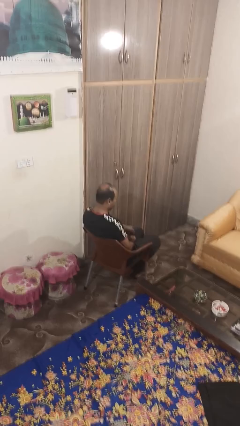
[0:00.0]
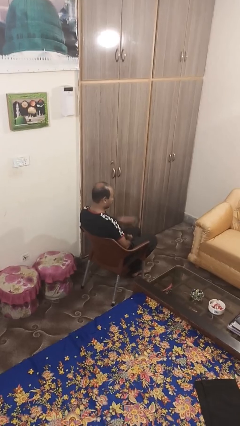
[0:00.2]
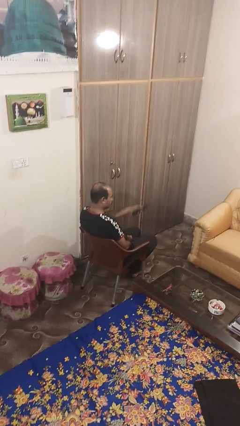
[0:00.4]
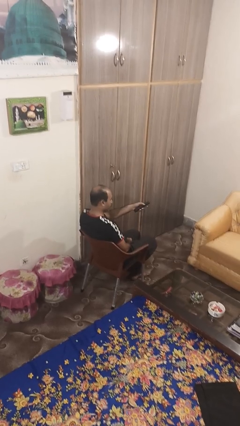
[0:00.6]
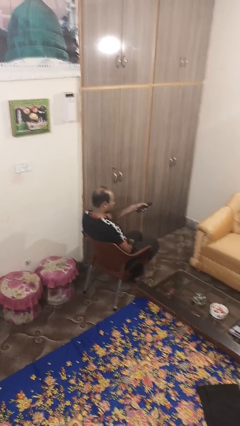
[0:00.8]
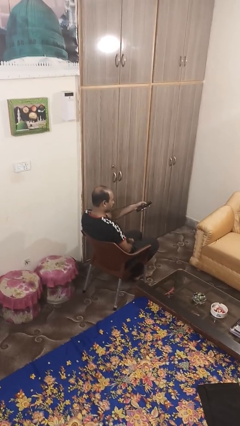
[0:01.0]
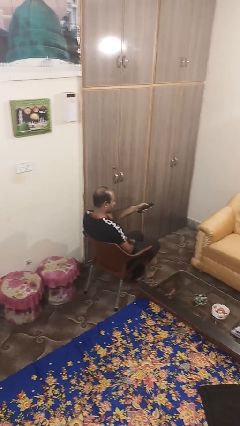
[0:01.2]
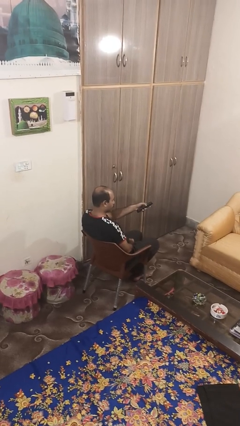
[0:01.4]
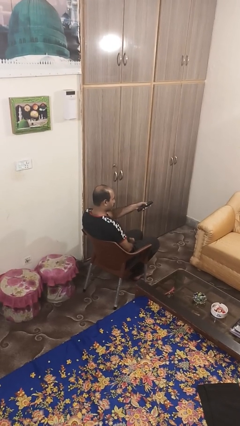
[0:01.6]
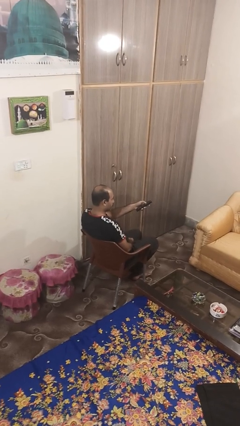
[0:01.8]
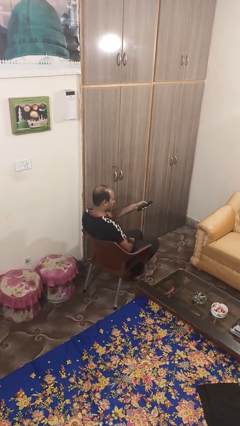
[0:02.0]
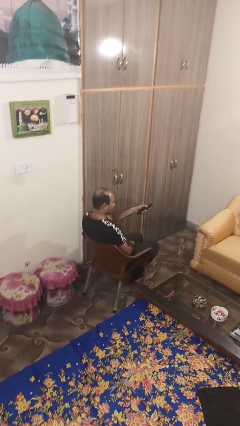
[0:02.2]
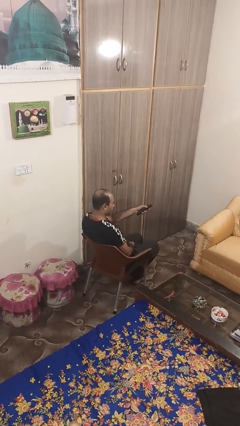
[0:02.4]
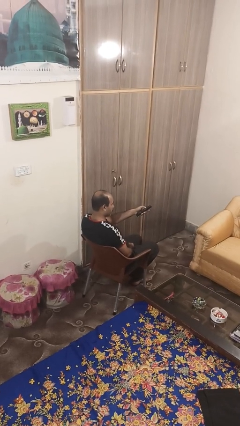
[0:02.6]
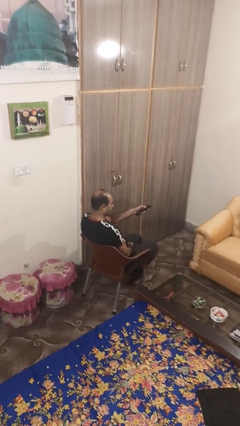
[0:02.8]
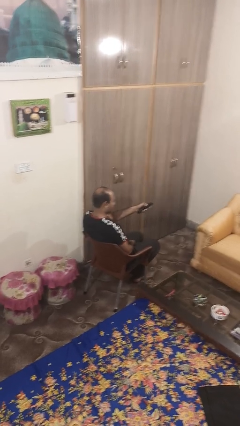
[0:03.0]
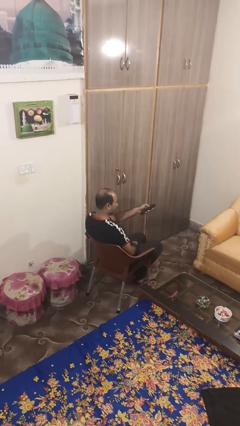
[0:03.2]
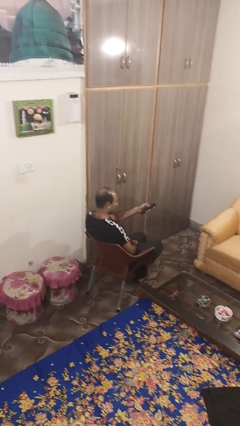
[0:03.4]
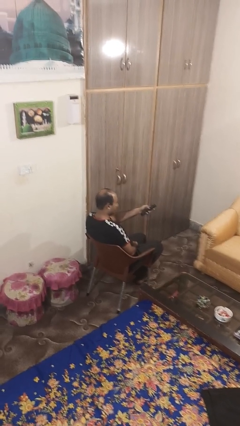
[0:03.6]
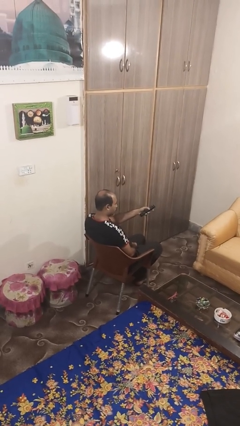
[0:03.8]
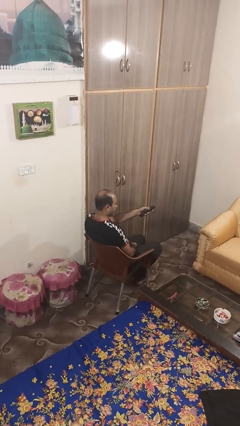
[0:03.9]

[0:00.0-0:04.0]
person uses television remote

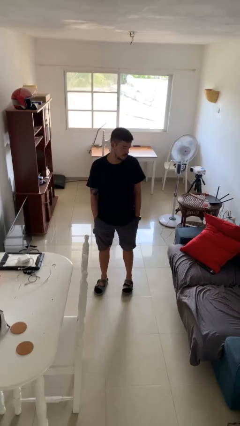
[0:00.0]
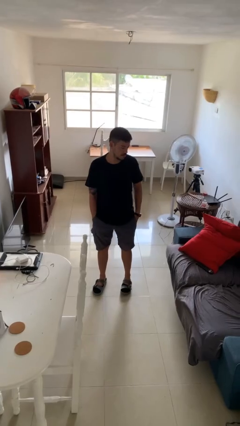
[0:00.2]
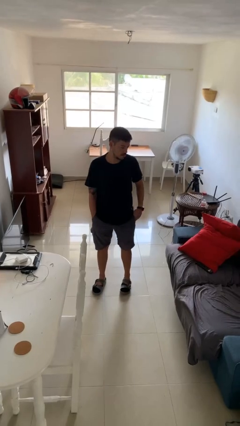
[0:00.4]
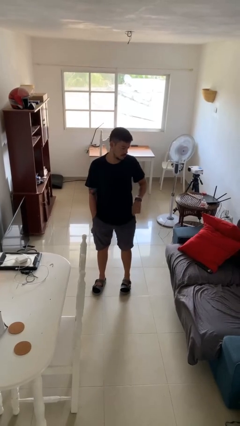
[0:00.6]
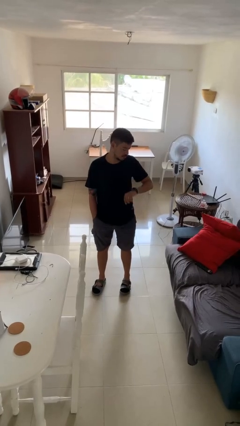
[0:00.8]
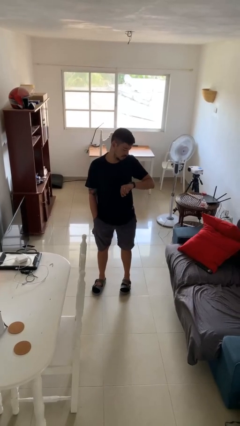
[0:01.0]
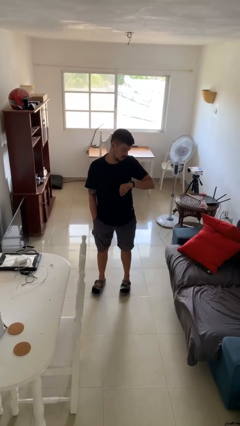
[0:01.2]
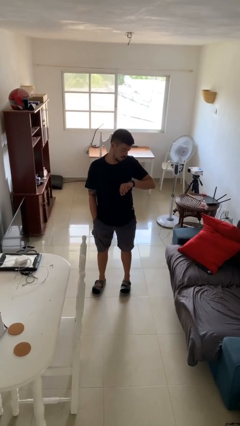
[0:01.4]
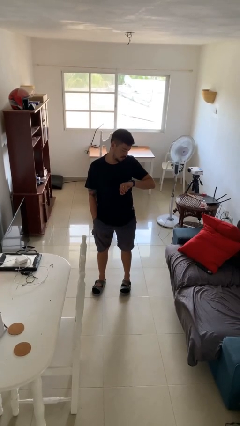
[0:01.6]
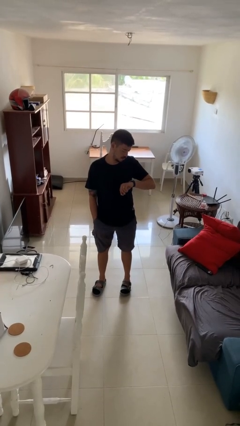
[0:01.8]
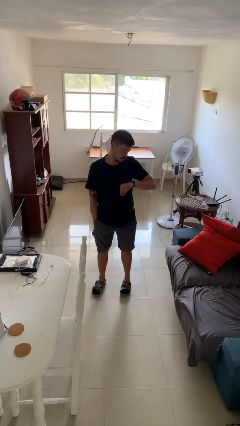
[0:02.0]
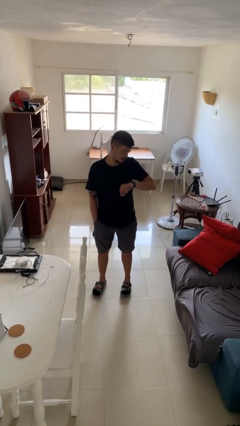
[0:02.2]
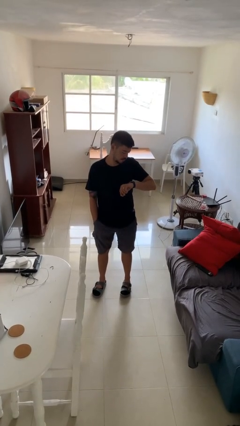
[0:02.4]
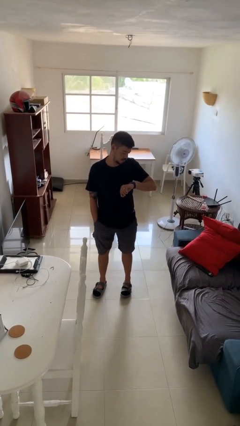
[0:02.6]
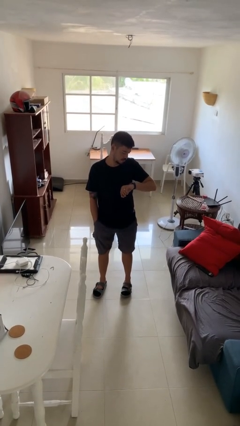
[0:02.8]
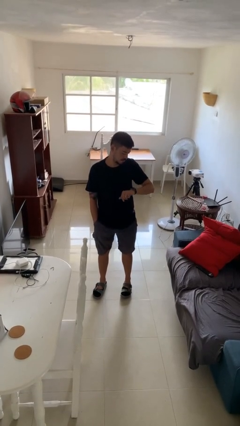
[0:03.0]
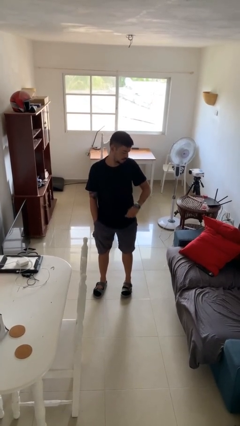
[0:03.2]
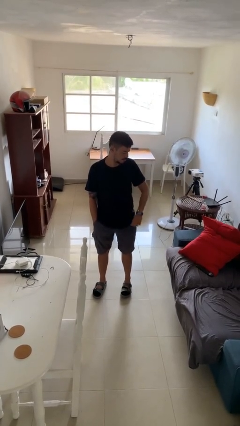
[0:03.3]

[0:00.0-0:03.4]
person looks at wristwatch

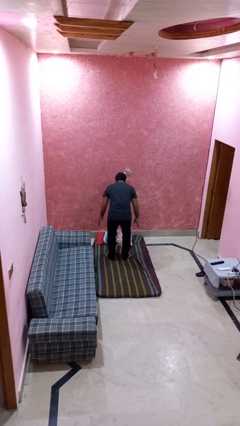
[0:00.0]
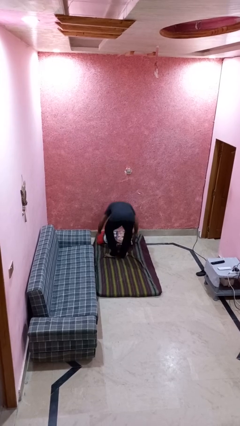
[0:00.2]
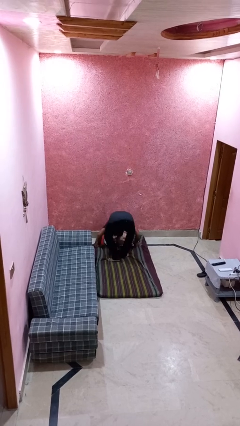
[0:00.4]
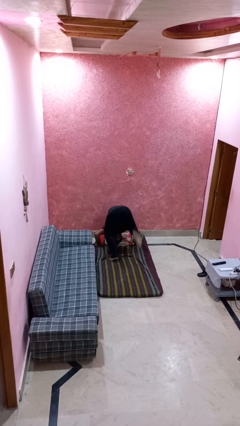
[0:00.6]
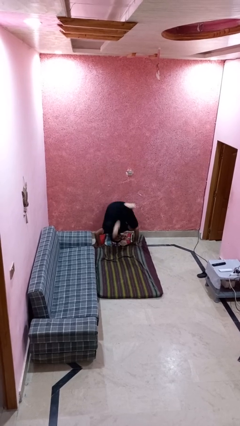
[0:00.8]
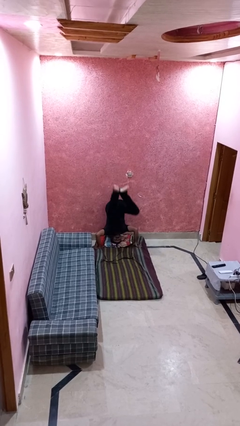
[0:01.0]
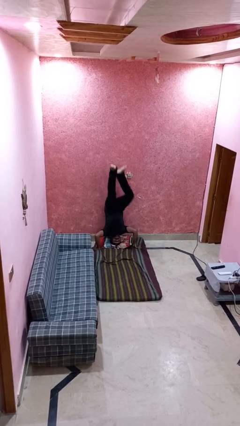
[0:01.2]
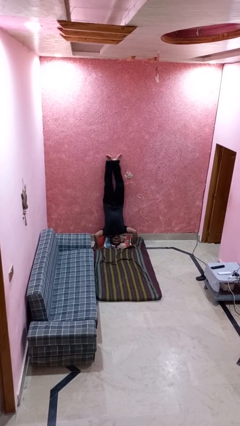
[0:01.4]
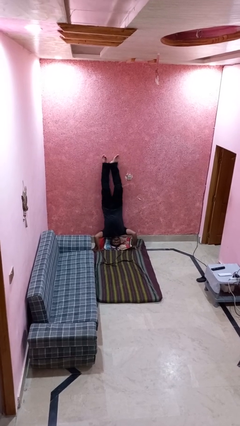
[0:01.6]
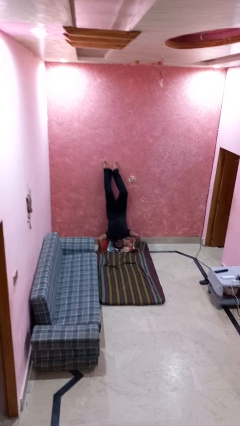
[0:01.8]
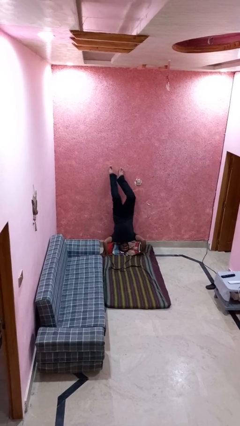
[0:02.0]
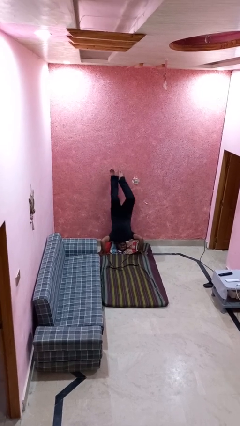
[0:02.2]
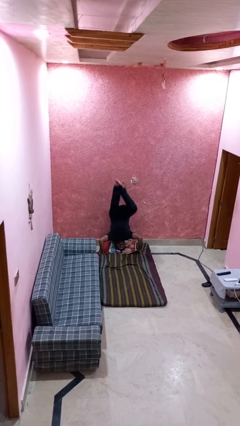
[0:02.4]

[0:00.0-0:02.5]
person handstand

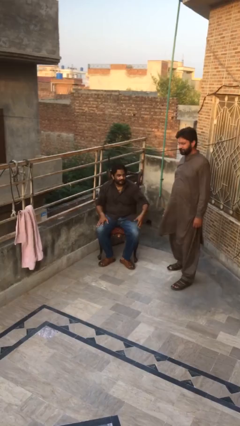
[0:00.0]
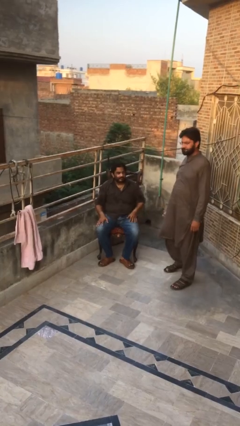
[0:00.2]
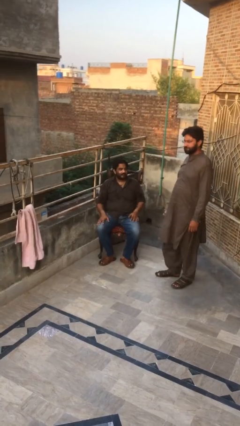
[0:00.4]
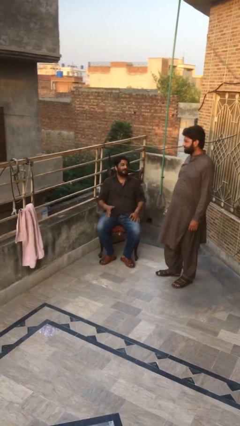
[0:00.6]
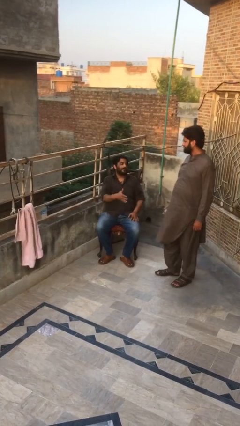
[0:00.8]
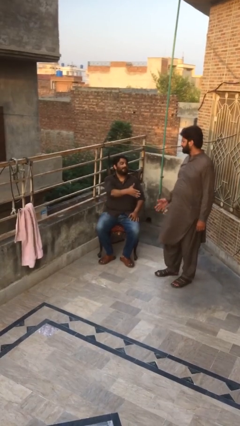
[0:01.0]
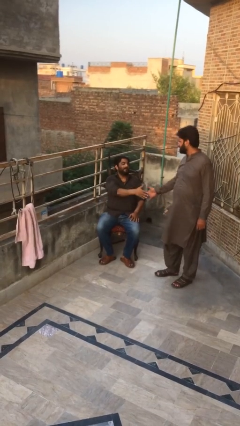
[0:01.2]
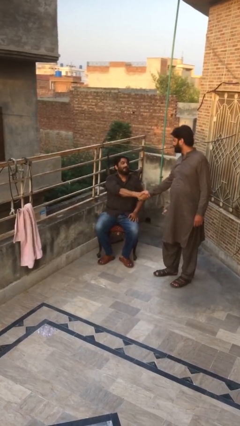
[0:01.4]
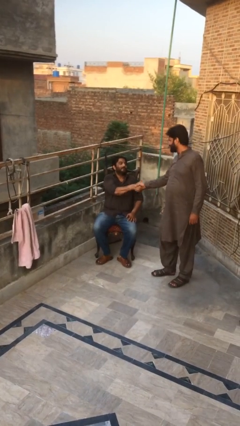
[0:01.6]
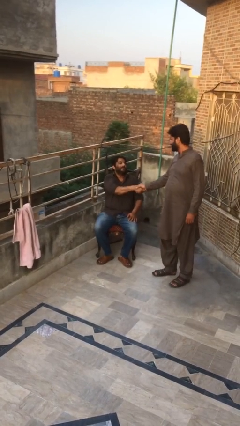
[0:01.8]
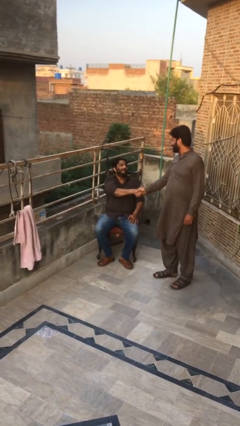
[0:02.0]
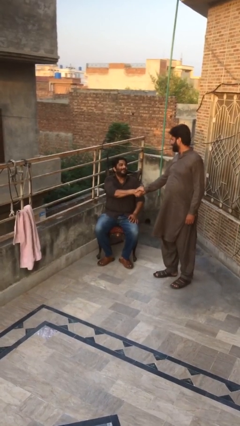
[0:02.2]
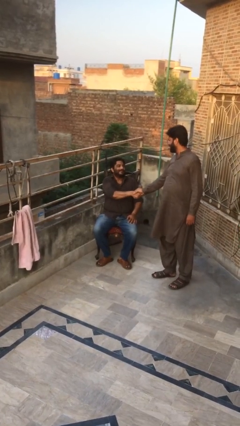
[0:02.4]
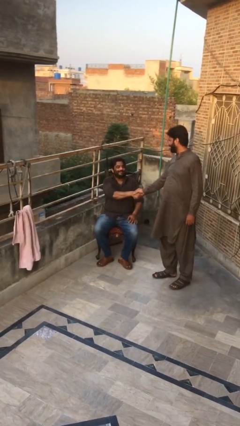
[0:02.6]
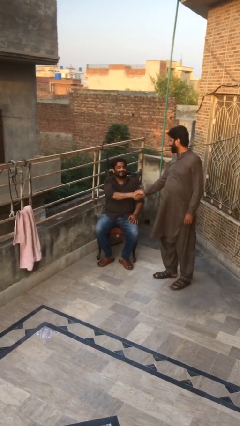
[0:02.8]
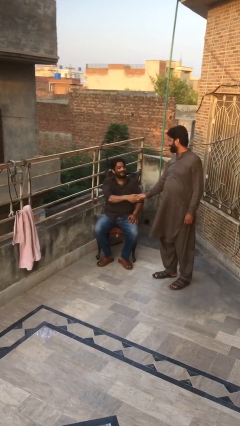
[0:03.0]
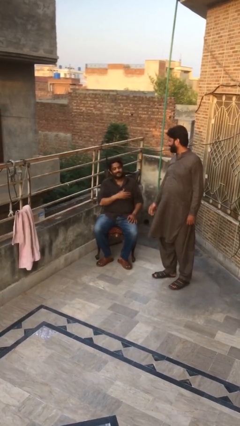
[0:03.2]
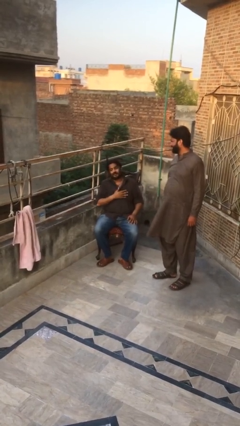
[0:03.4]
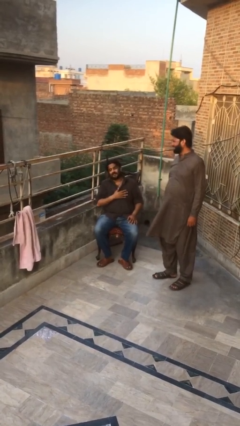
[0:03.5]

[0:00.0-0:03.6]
person shakes hand

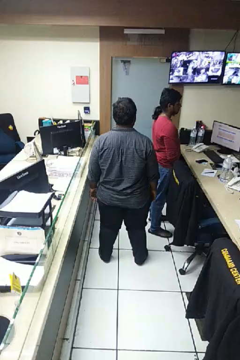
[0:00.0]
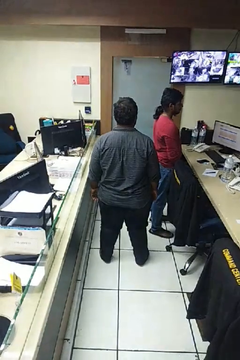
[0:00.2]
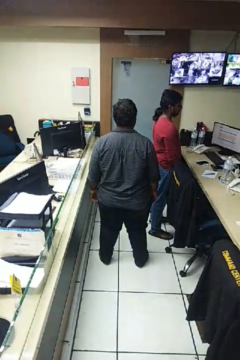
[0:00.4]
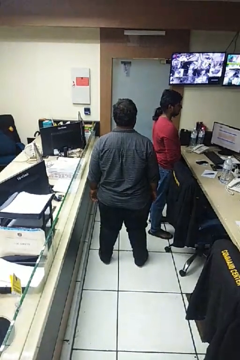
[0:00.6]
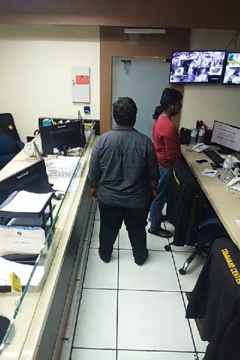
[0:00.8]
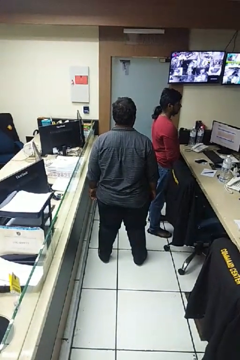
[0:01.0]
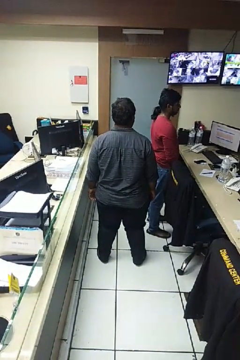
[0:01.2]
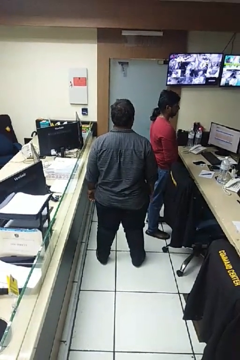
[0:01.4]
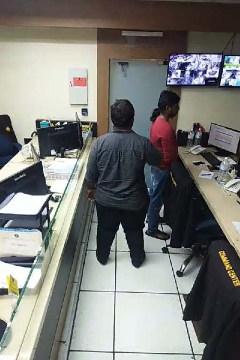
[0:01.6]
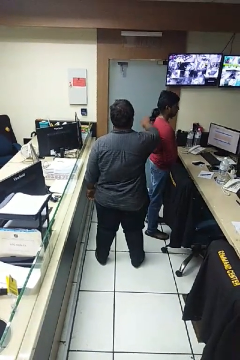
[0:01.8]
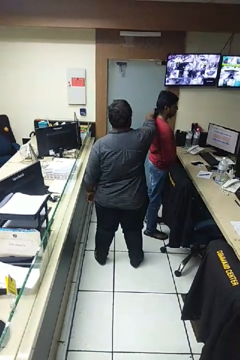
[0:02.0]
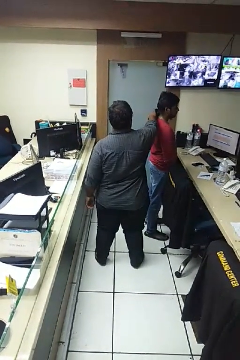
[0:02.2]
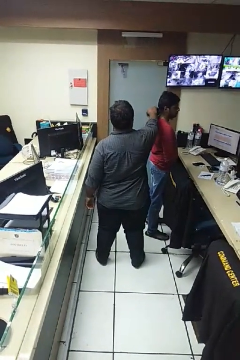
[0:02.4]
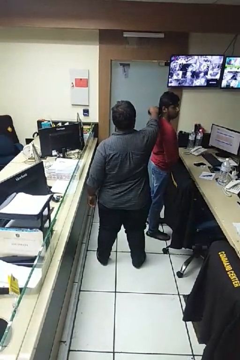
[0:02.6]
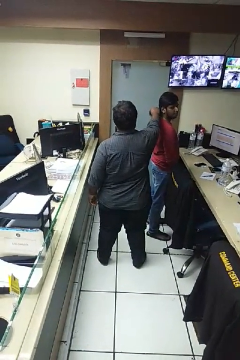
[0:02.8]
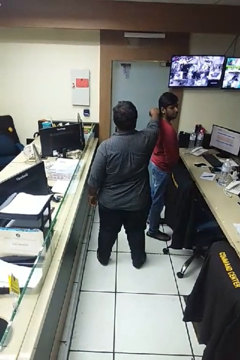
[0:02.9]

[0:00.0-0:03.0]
person grabs person by hair

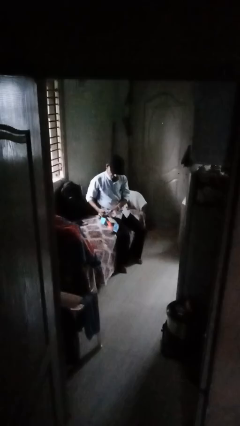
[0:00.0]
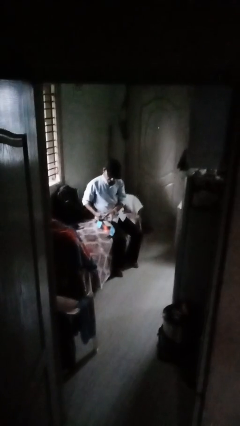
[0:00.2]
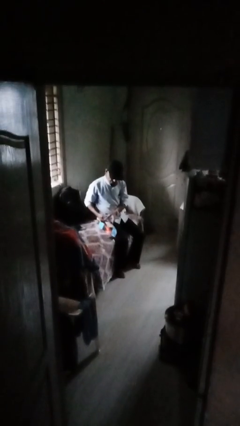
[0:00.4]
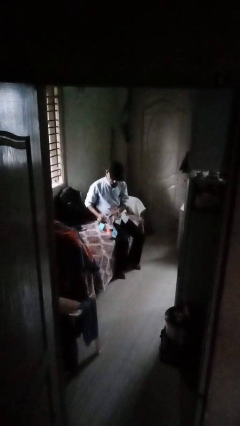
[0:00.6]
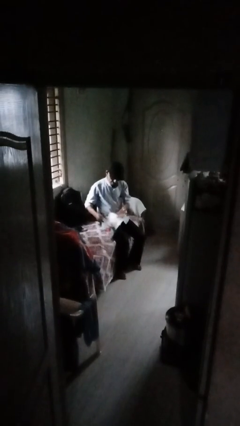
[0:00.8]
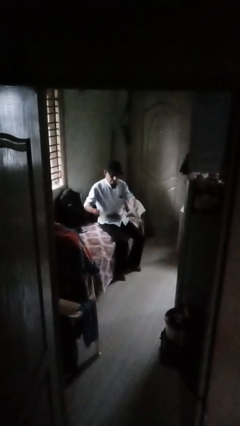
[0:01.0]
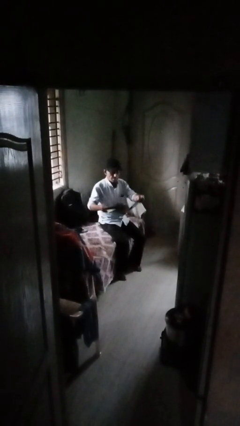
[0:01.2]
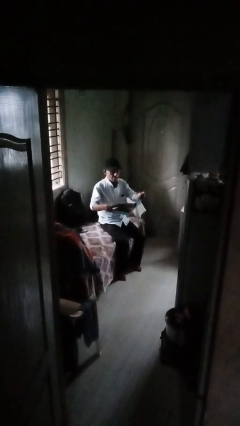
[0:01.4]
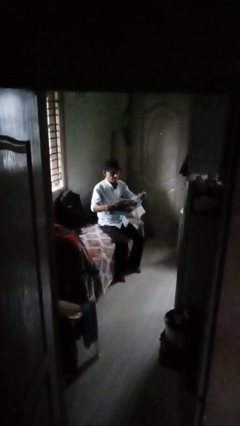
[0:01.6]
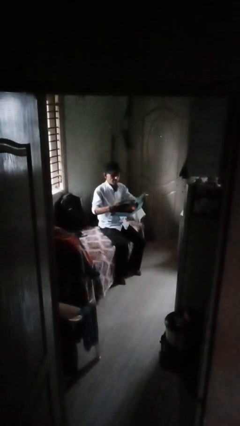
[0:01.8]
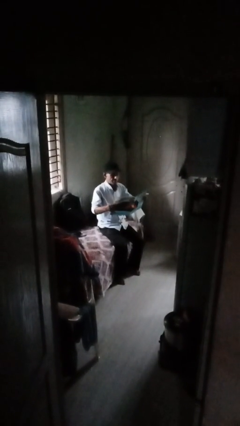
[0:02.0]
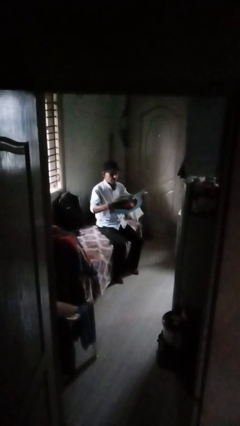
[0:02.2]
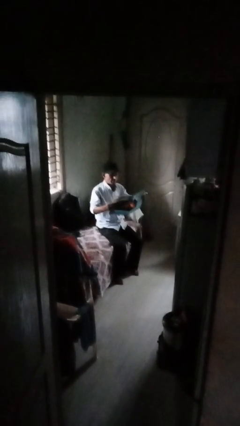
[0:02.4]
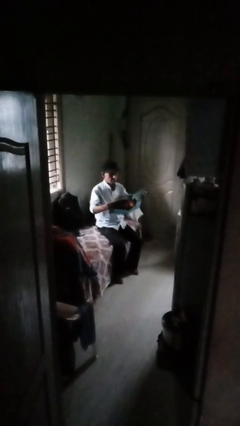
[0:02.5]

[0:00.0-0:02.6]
person reads magazine
